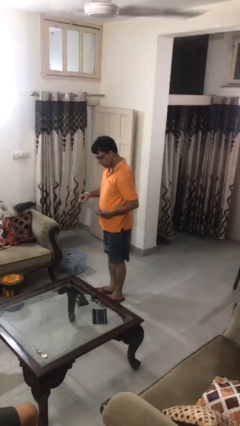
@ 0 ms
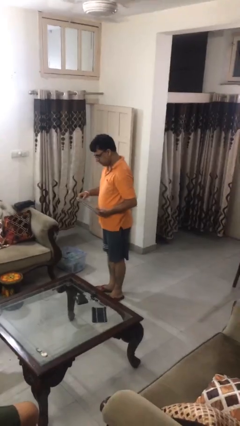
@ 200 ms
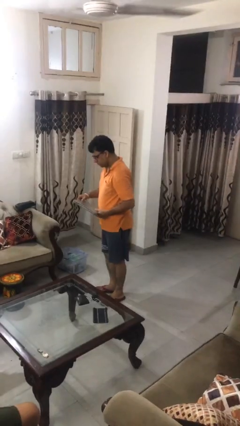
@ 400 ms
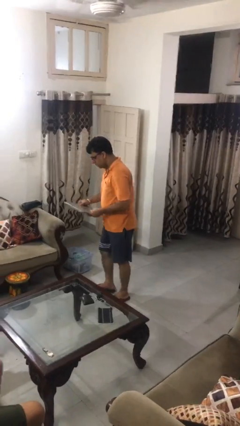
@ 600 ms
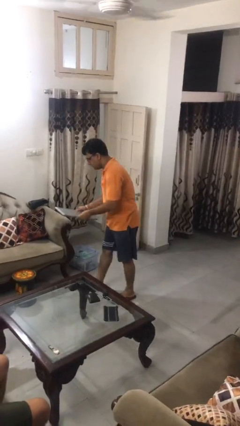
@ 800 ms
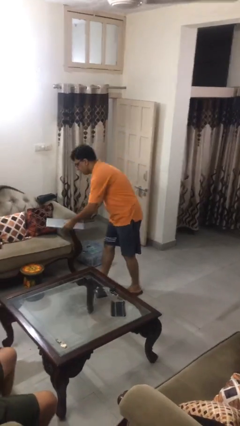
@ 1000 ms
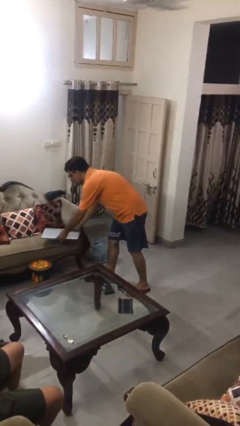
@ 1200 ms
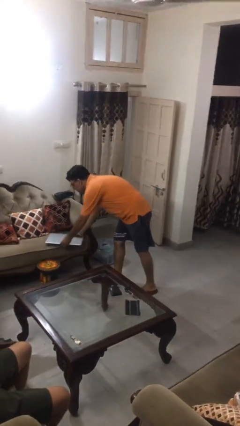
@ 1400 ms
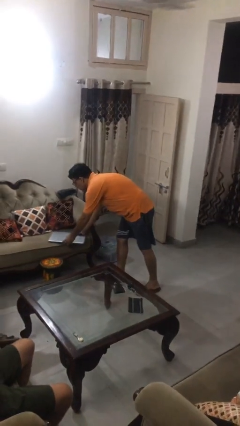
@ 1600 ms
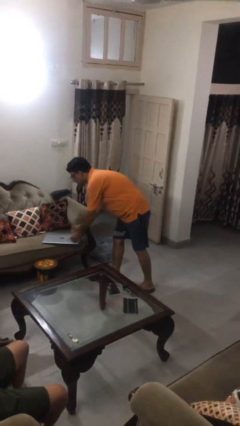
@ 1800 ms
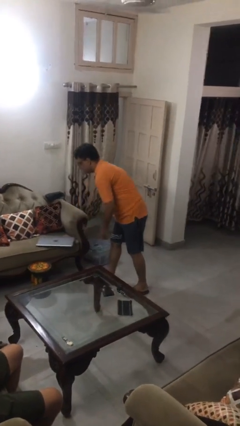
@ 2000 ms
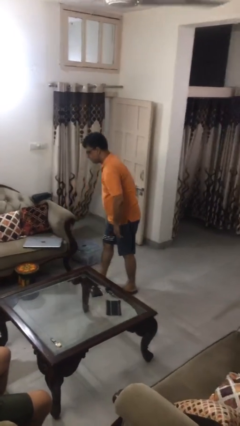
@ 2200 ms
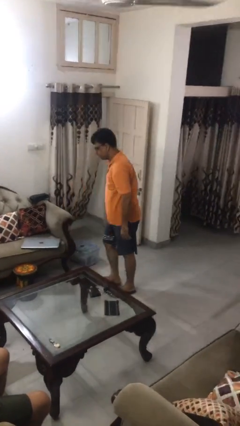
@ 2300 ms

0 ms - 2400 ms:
person puts down object on couch

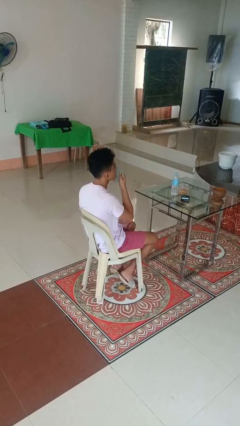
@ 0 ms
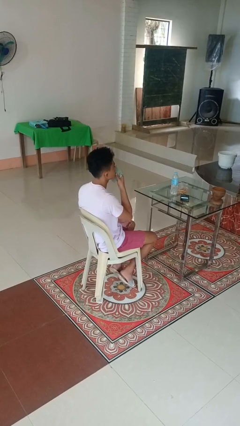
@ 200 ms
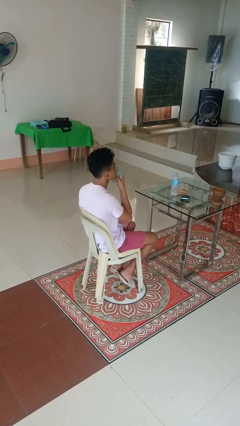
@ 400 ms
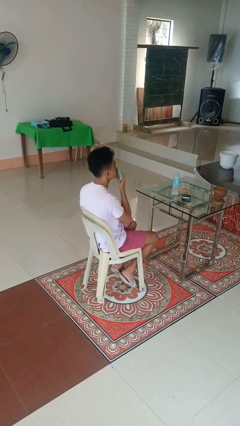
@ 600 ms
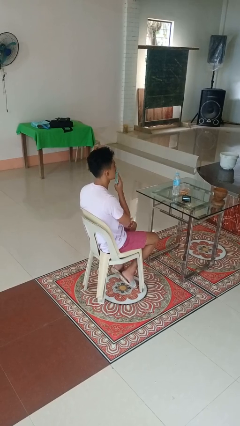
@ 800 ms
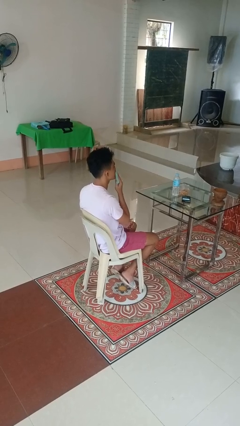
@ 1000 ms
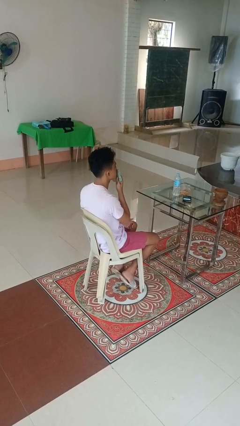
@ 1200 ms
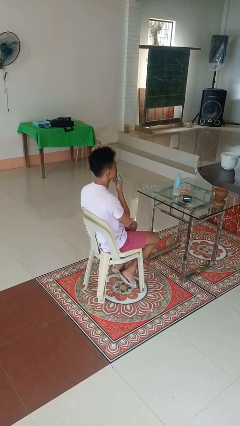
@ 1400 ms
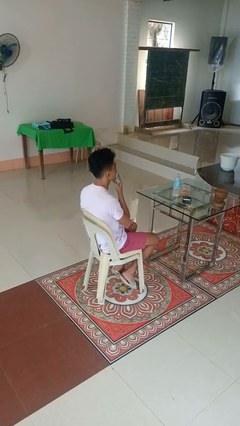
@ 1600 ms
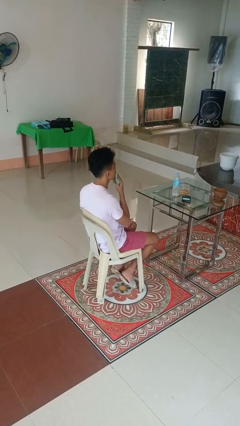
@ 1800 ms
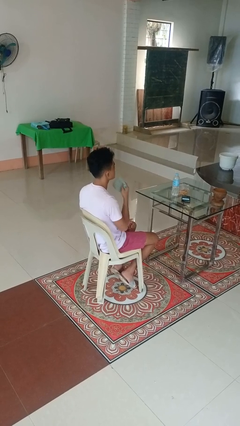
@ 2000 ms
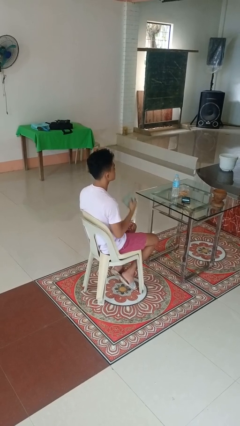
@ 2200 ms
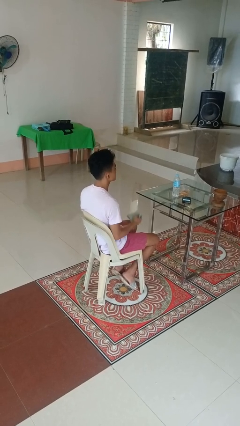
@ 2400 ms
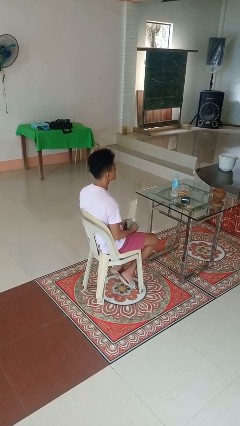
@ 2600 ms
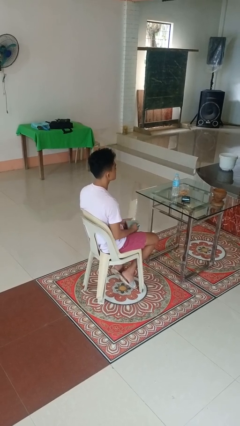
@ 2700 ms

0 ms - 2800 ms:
person wipes mouth with napkin

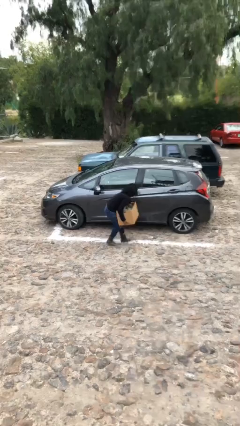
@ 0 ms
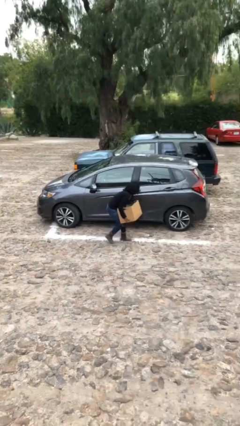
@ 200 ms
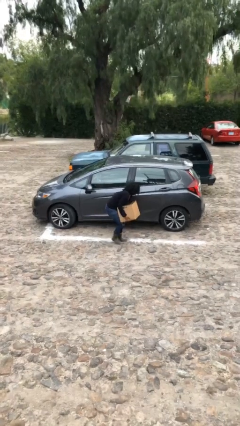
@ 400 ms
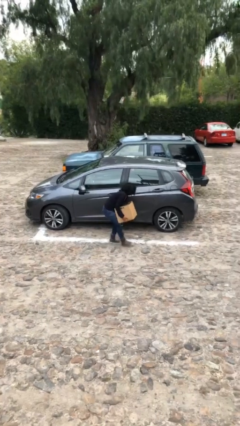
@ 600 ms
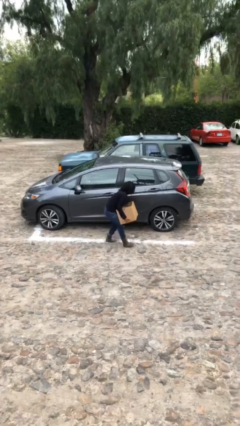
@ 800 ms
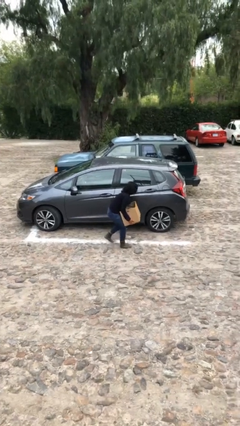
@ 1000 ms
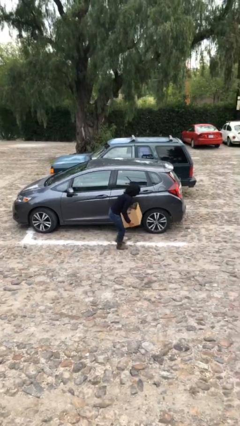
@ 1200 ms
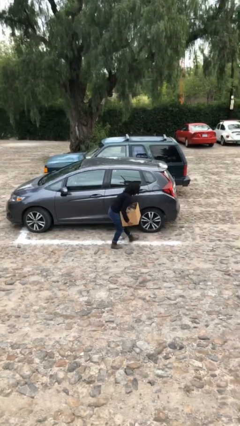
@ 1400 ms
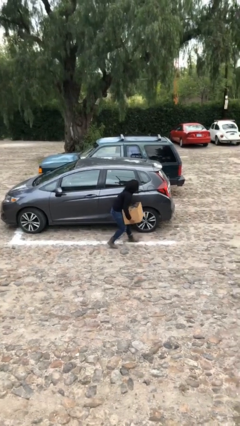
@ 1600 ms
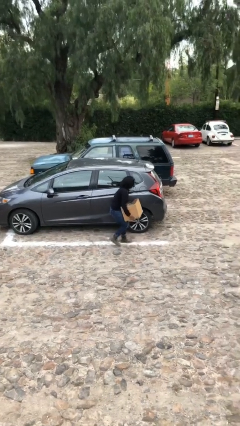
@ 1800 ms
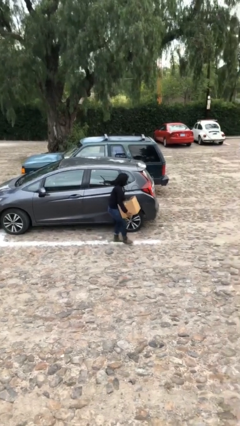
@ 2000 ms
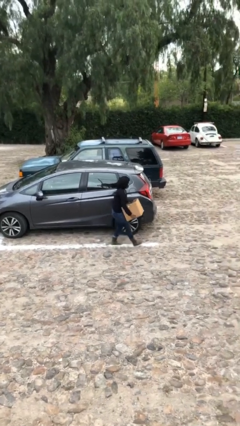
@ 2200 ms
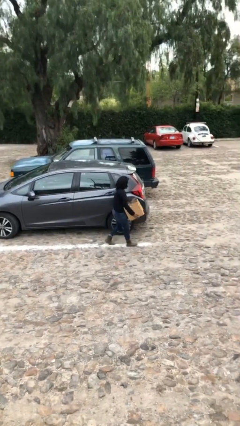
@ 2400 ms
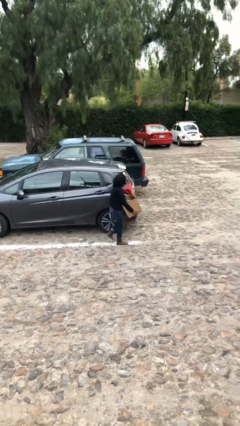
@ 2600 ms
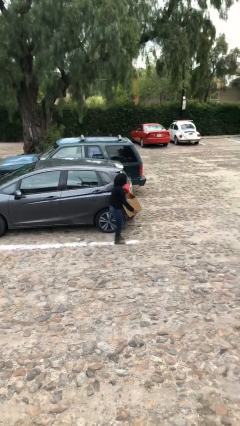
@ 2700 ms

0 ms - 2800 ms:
person carries heavy object

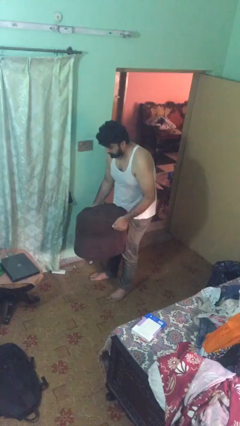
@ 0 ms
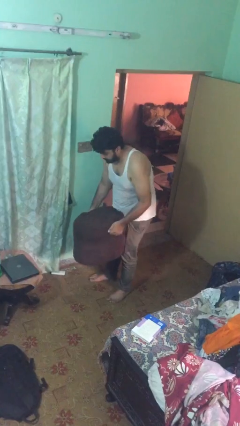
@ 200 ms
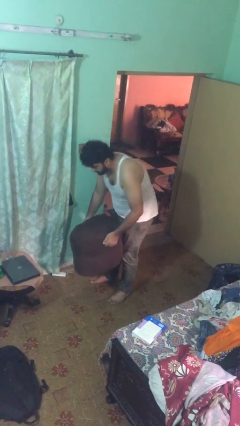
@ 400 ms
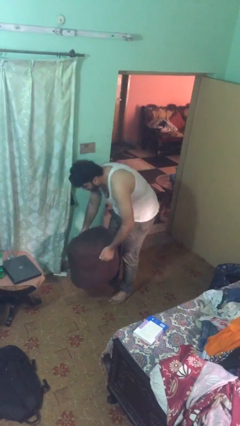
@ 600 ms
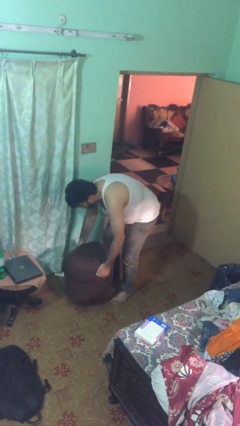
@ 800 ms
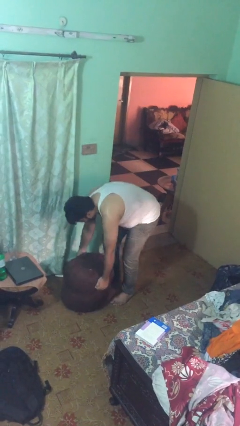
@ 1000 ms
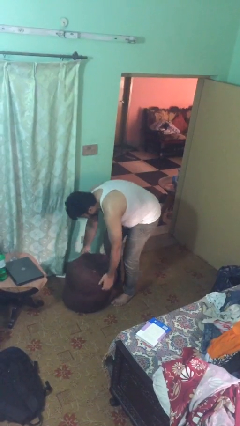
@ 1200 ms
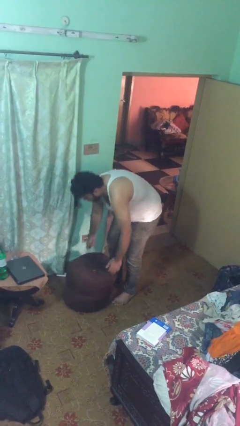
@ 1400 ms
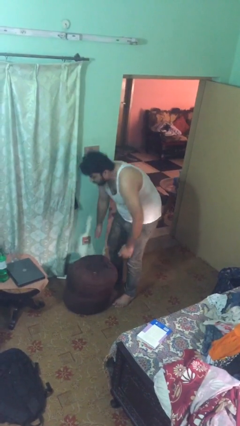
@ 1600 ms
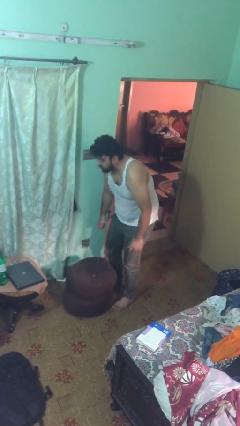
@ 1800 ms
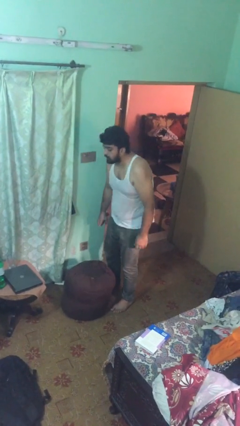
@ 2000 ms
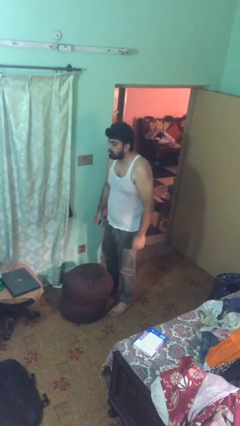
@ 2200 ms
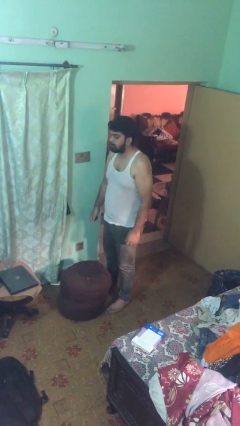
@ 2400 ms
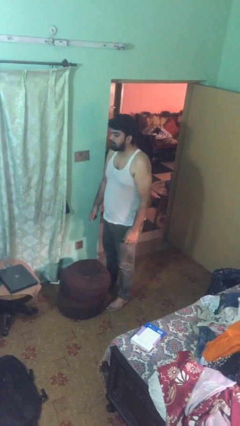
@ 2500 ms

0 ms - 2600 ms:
person puts down object on floor

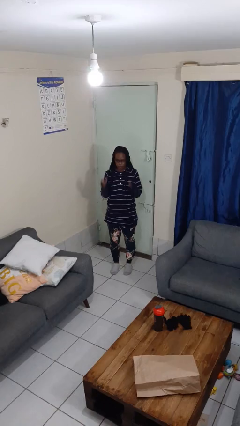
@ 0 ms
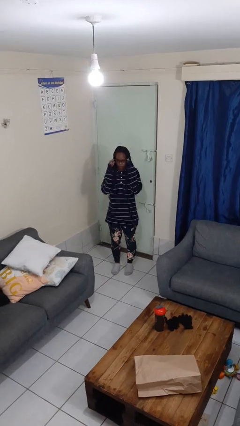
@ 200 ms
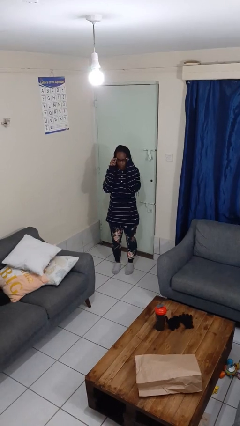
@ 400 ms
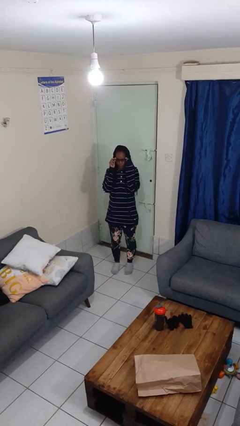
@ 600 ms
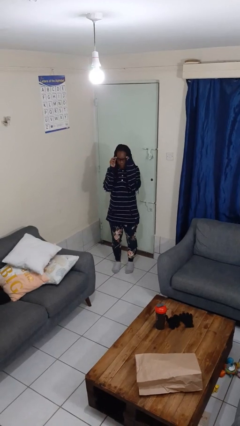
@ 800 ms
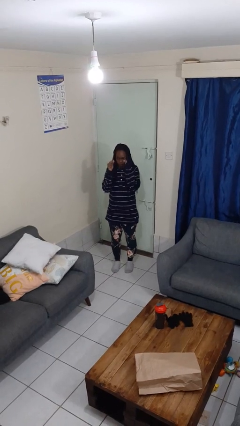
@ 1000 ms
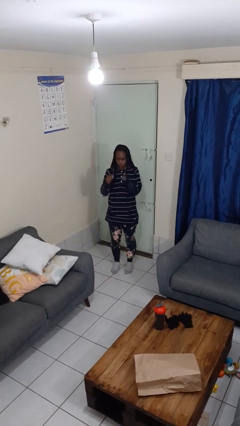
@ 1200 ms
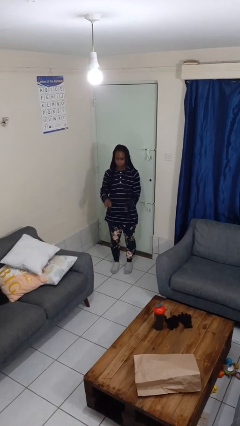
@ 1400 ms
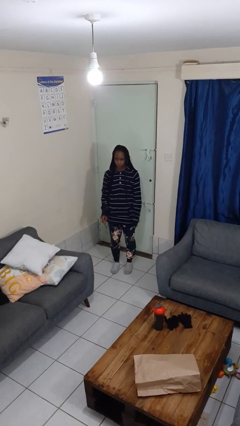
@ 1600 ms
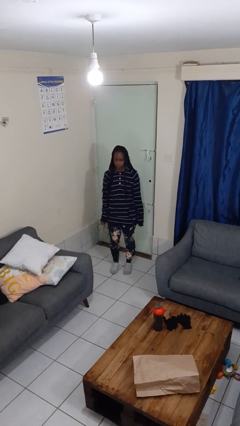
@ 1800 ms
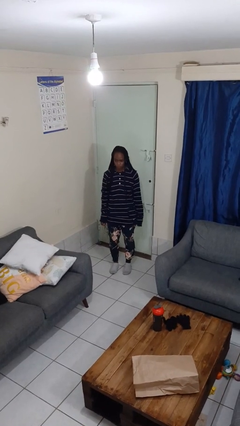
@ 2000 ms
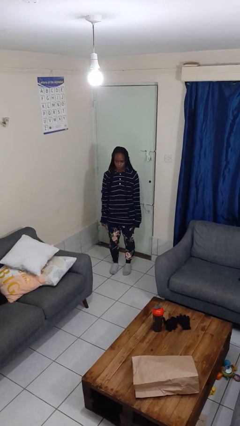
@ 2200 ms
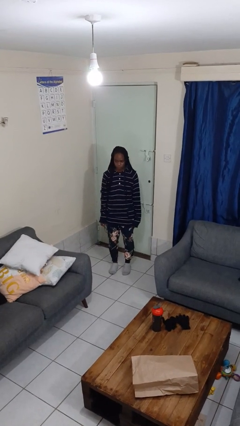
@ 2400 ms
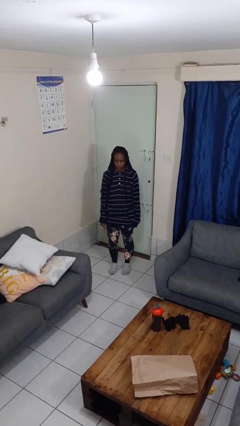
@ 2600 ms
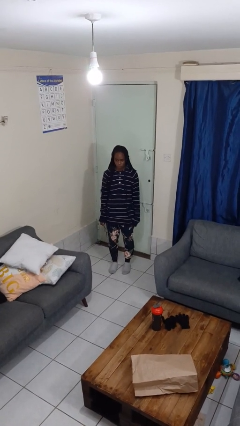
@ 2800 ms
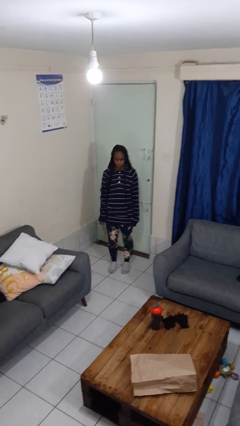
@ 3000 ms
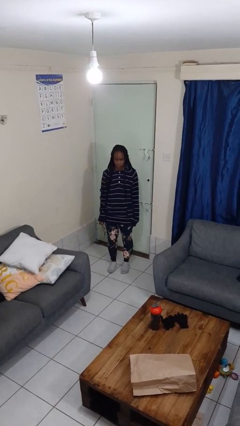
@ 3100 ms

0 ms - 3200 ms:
person takes off glasses

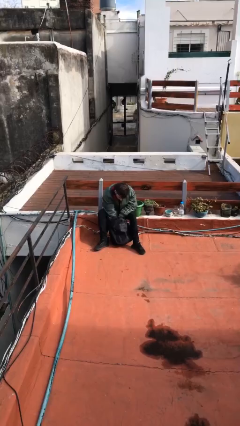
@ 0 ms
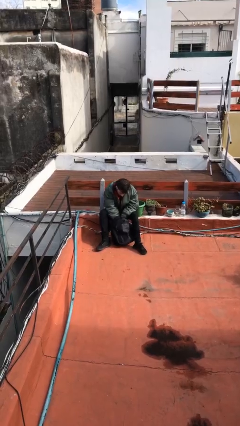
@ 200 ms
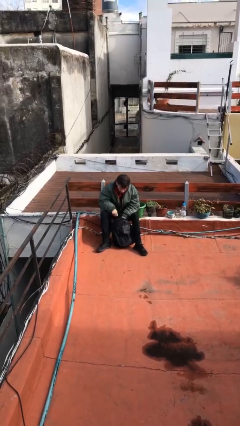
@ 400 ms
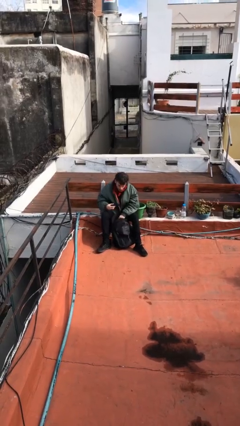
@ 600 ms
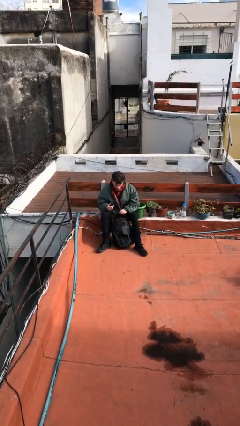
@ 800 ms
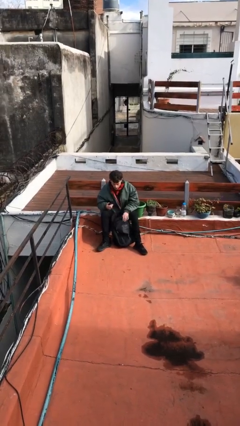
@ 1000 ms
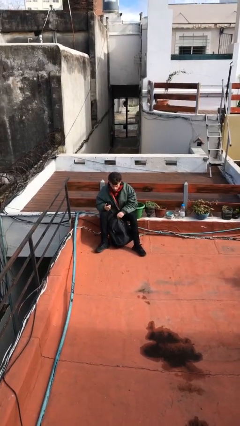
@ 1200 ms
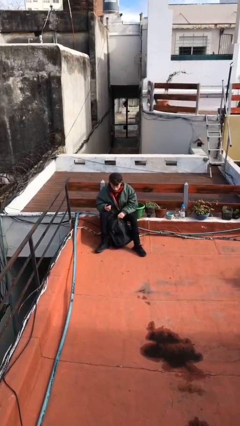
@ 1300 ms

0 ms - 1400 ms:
person takes object from backpack

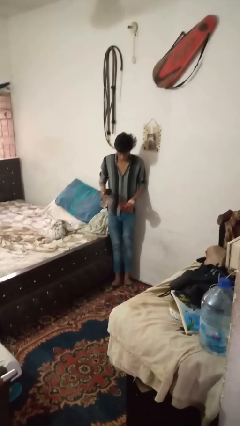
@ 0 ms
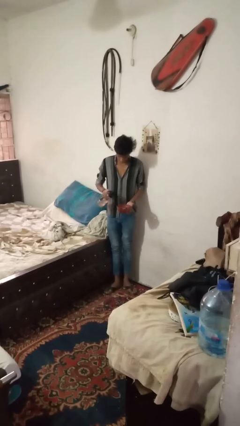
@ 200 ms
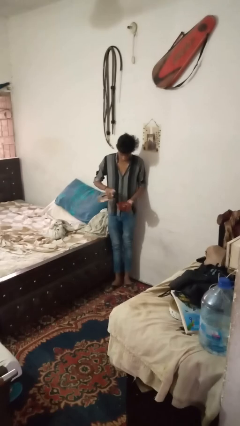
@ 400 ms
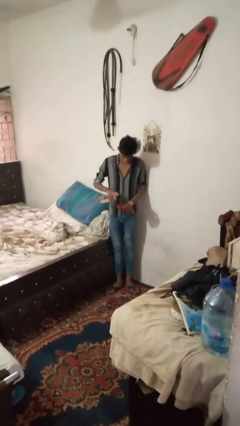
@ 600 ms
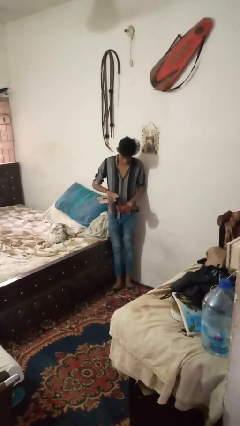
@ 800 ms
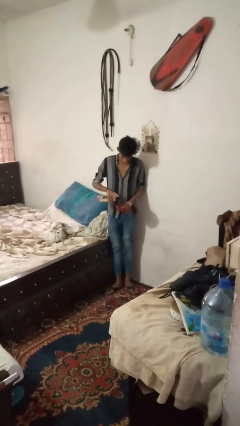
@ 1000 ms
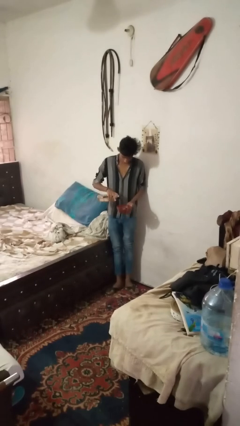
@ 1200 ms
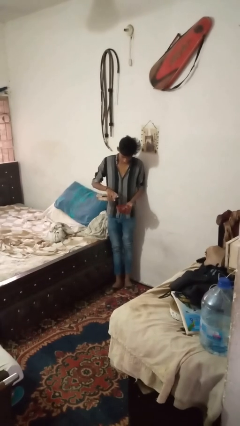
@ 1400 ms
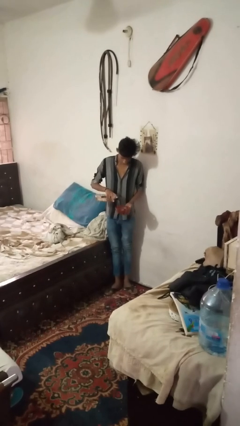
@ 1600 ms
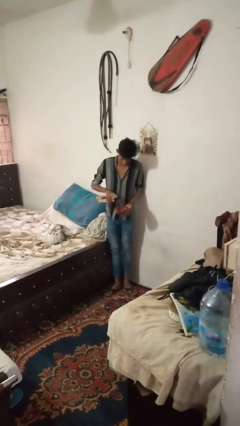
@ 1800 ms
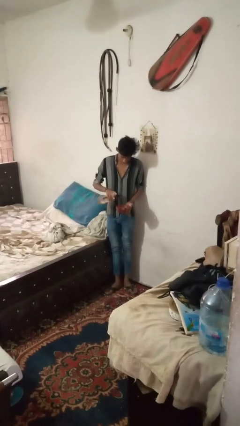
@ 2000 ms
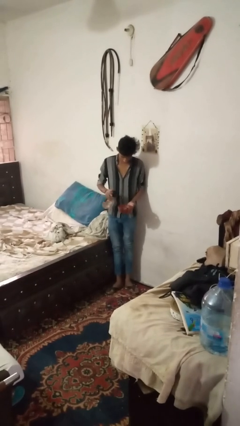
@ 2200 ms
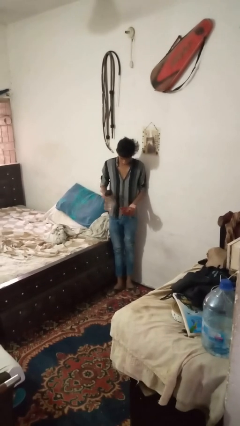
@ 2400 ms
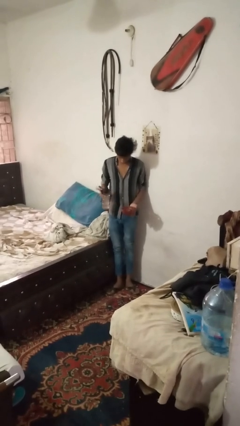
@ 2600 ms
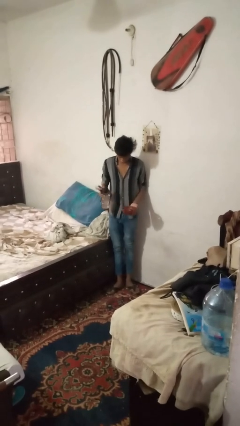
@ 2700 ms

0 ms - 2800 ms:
person pours liquid into cup
